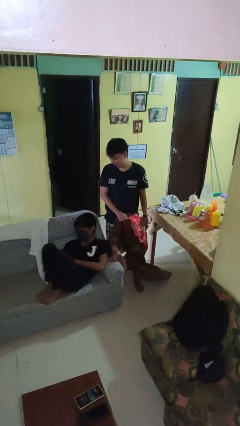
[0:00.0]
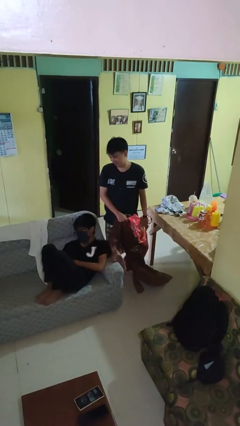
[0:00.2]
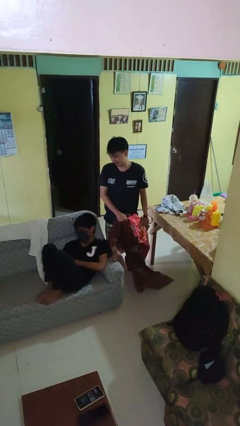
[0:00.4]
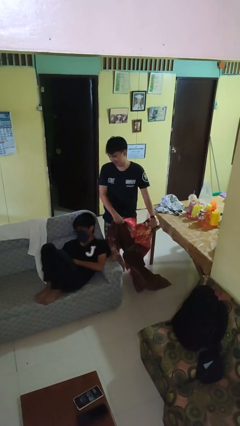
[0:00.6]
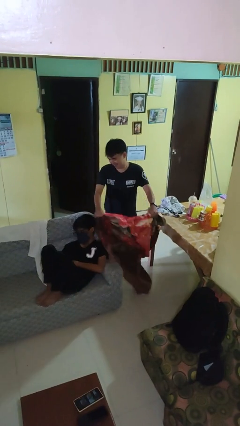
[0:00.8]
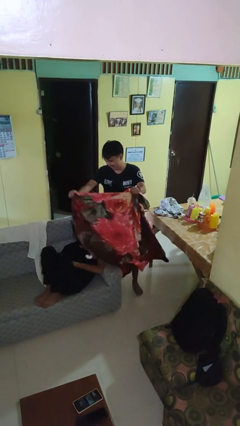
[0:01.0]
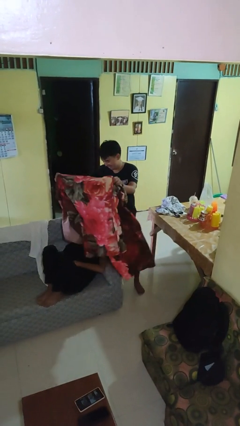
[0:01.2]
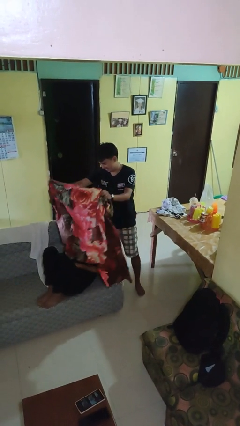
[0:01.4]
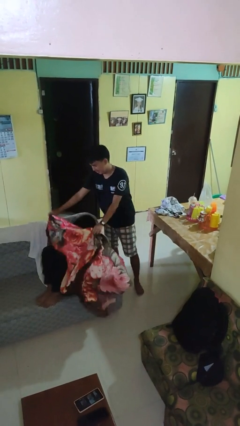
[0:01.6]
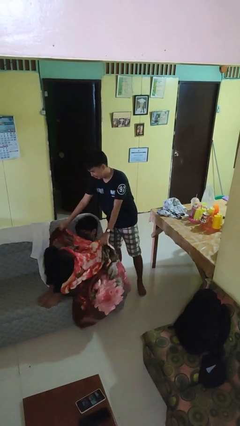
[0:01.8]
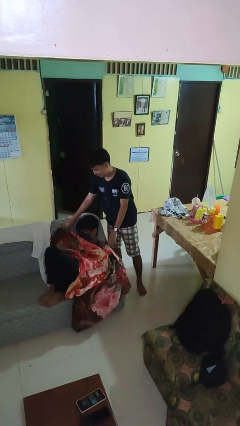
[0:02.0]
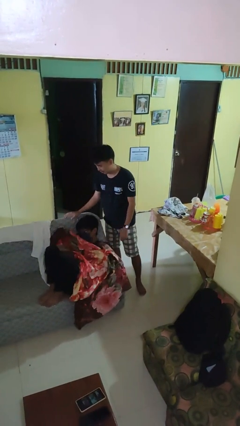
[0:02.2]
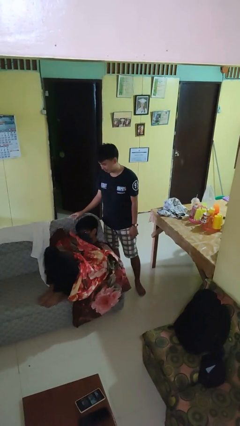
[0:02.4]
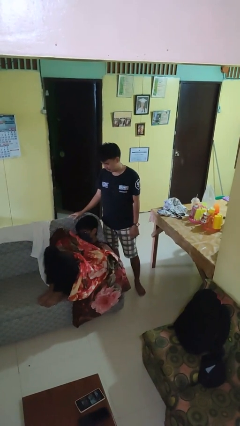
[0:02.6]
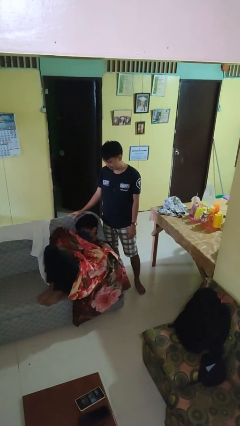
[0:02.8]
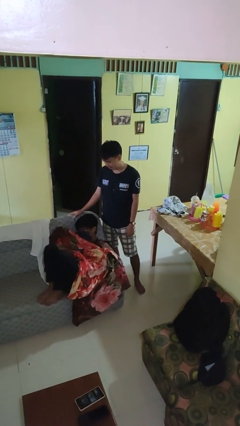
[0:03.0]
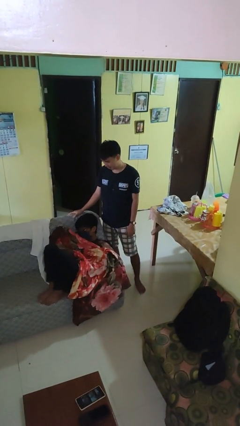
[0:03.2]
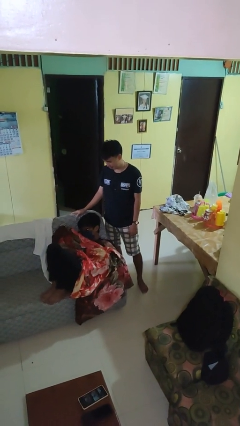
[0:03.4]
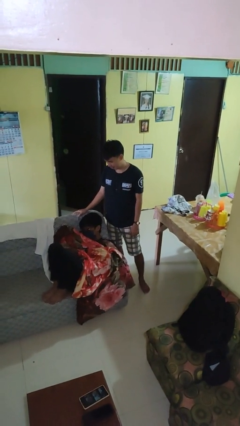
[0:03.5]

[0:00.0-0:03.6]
person covers friend with blanket

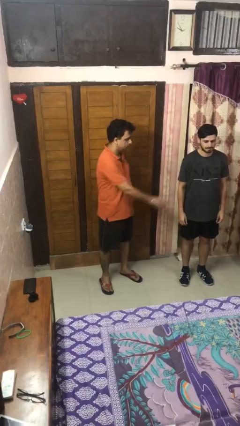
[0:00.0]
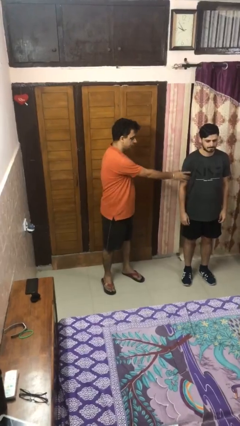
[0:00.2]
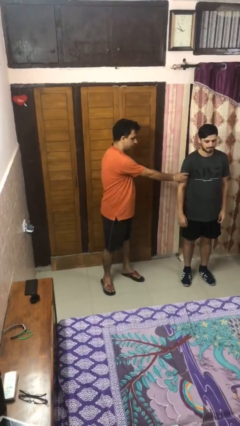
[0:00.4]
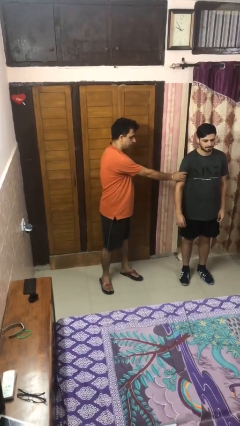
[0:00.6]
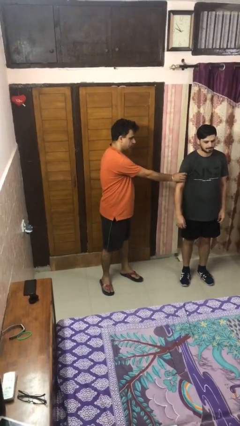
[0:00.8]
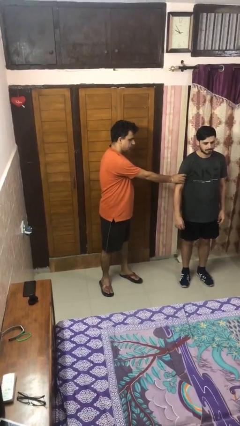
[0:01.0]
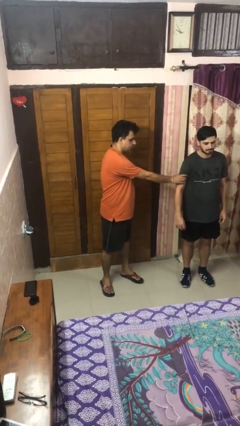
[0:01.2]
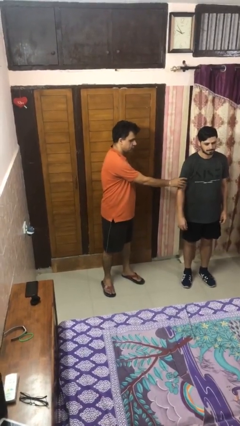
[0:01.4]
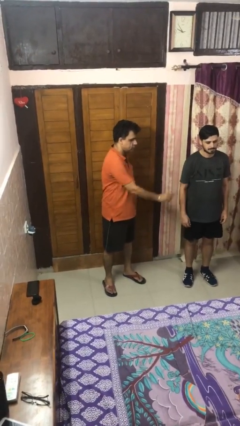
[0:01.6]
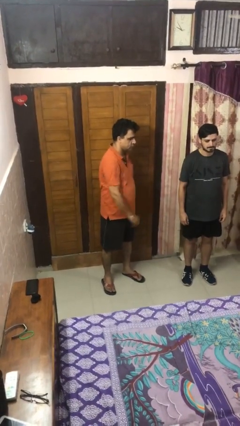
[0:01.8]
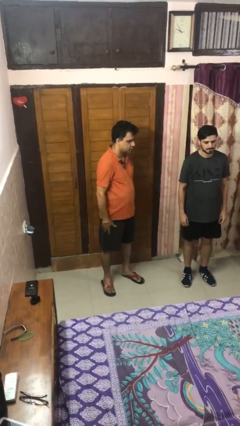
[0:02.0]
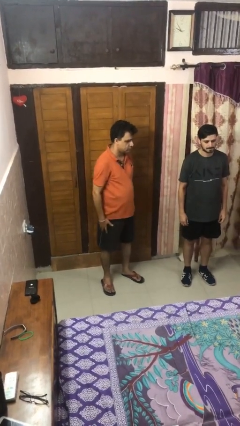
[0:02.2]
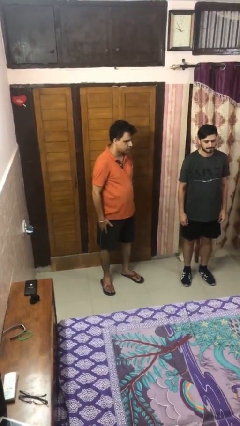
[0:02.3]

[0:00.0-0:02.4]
person grabs person by bicep

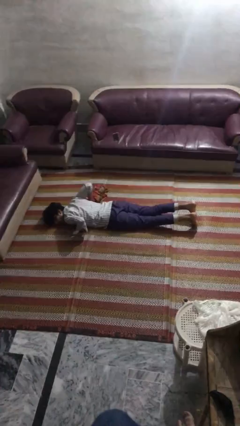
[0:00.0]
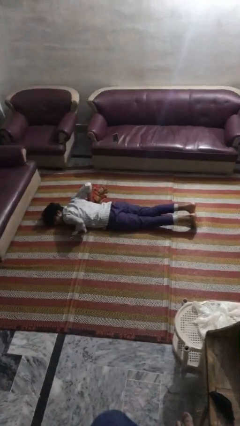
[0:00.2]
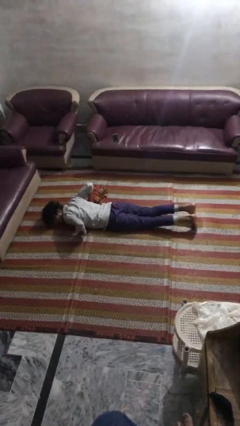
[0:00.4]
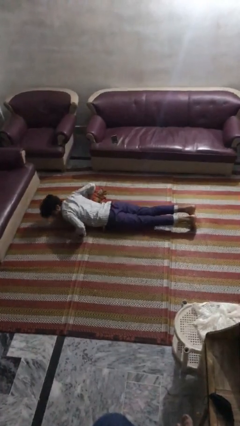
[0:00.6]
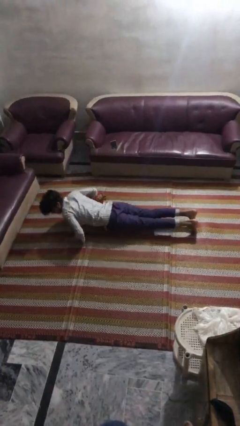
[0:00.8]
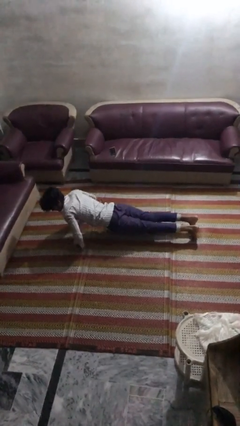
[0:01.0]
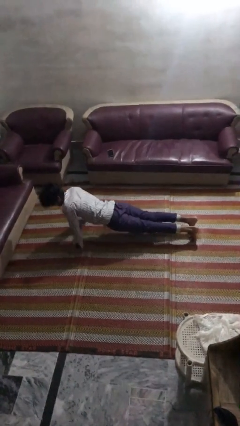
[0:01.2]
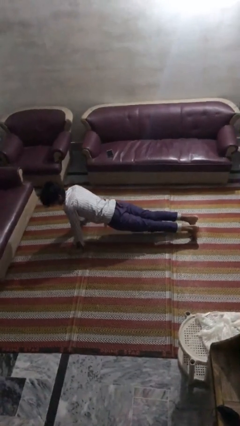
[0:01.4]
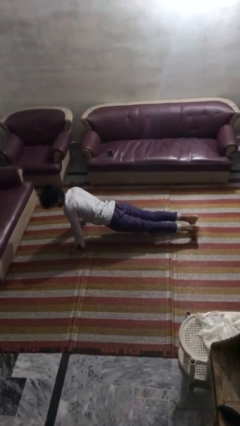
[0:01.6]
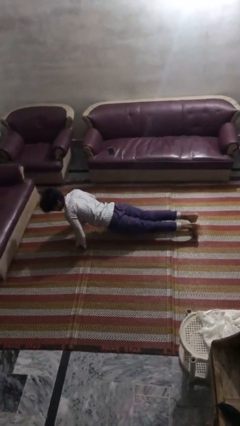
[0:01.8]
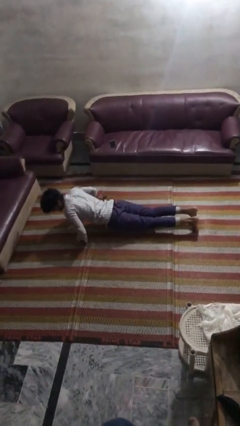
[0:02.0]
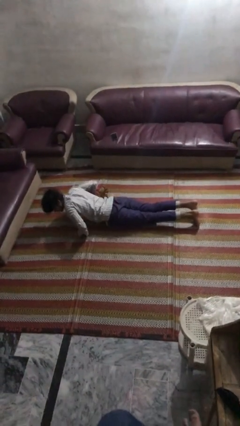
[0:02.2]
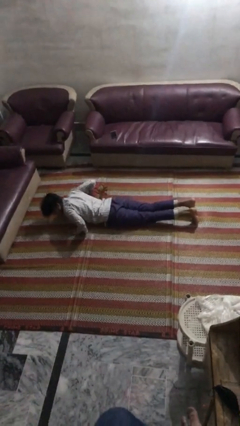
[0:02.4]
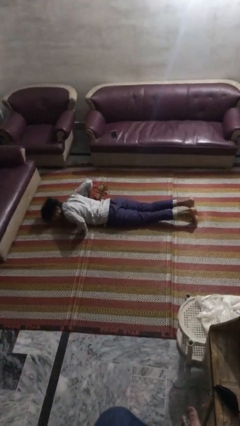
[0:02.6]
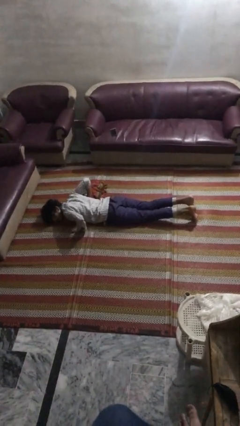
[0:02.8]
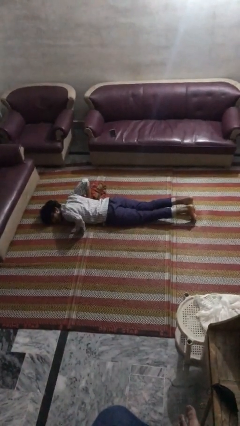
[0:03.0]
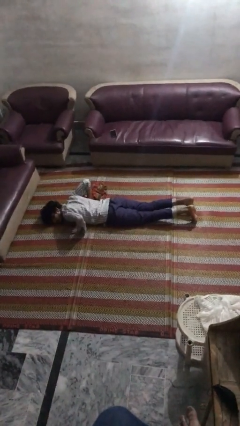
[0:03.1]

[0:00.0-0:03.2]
person exercises with pushup

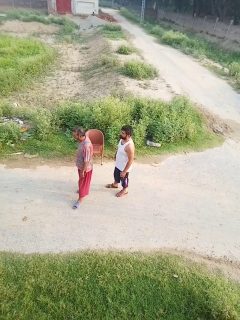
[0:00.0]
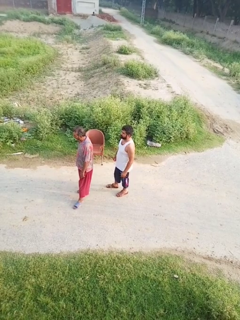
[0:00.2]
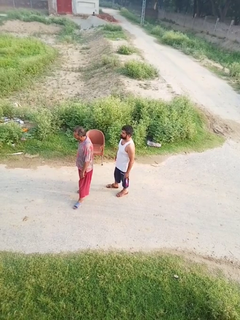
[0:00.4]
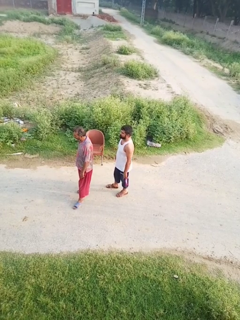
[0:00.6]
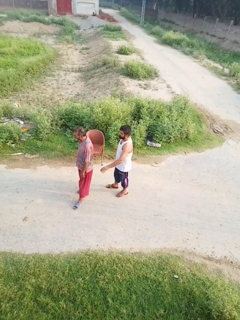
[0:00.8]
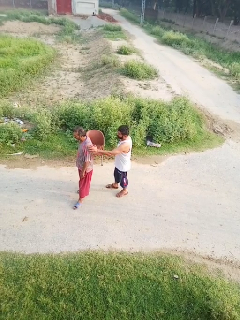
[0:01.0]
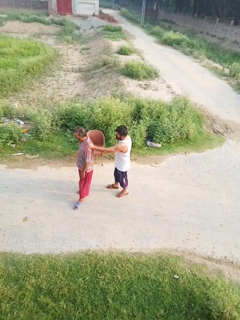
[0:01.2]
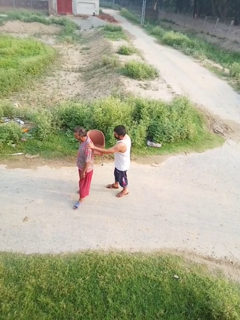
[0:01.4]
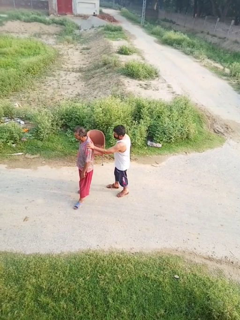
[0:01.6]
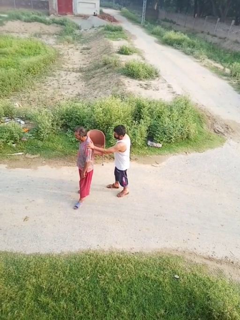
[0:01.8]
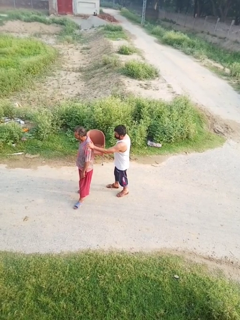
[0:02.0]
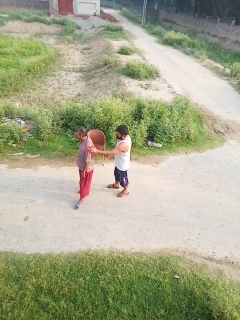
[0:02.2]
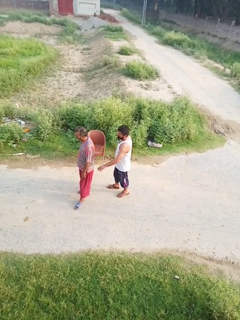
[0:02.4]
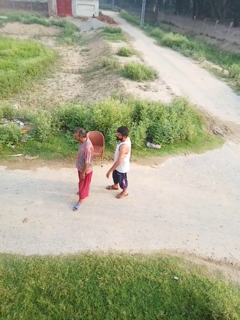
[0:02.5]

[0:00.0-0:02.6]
person touches back of person

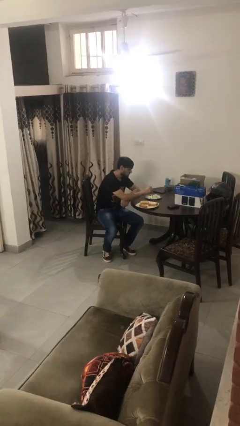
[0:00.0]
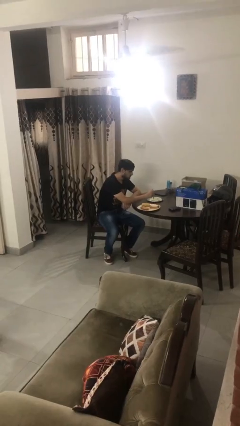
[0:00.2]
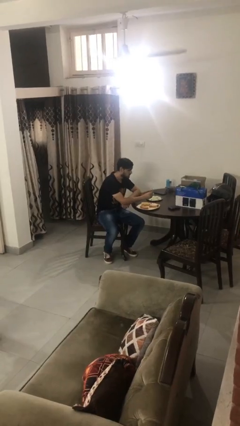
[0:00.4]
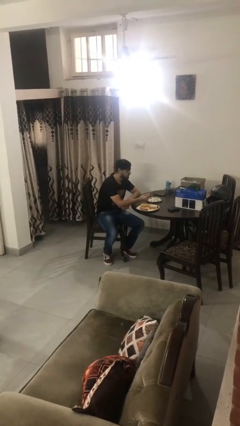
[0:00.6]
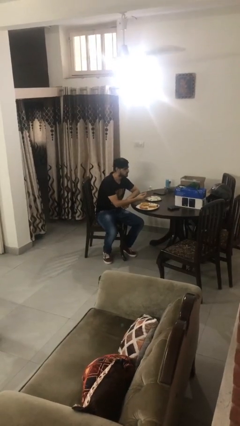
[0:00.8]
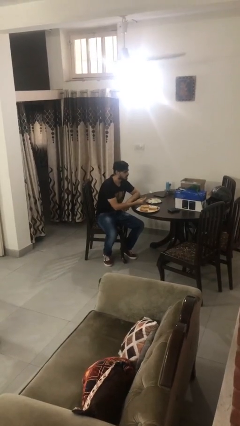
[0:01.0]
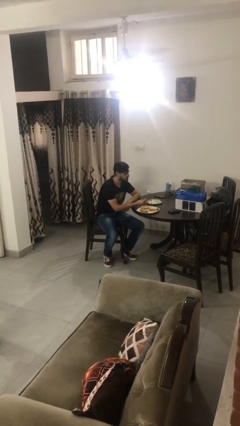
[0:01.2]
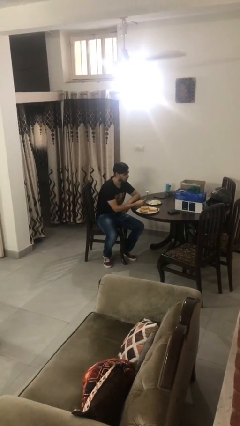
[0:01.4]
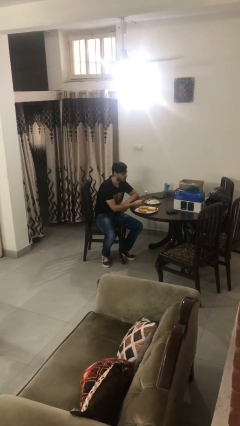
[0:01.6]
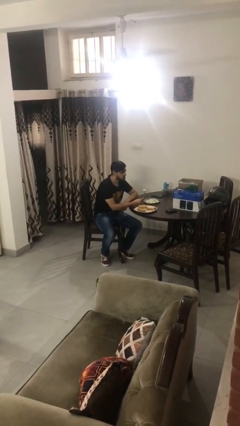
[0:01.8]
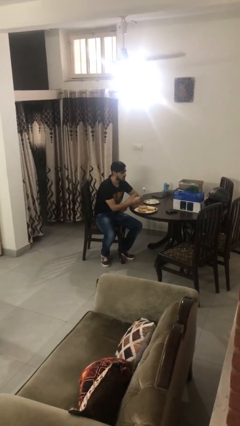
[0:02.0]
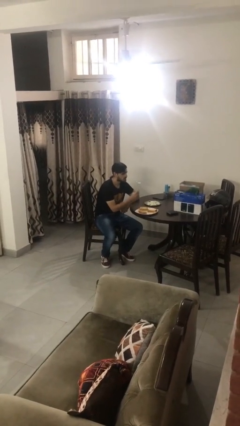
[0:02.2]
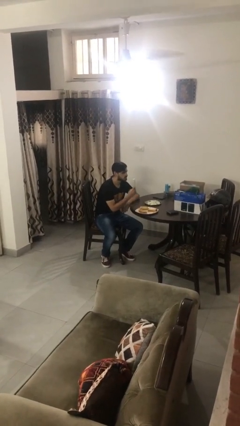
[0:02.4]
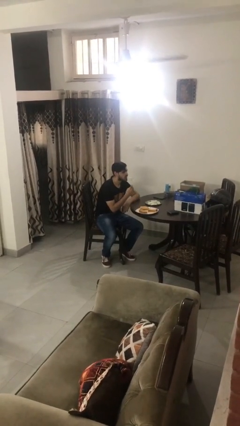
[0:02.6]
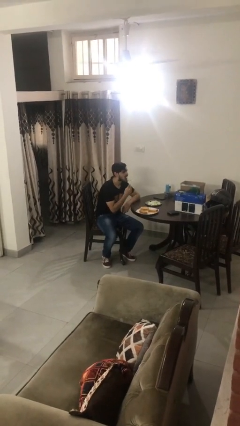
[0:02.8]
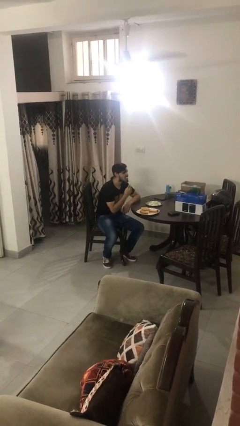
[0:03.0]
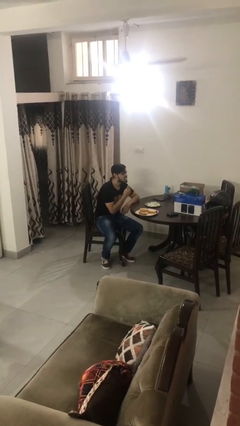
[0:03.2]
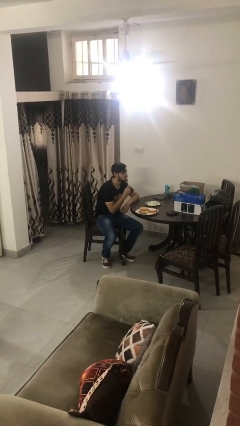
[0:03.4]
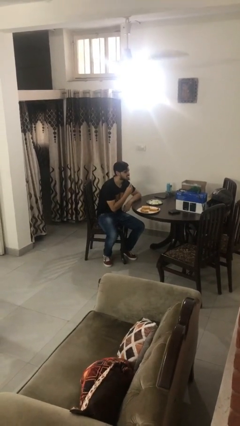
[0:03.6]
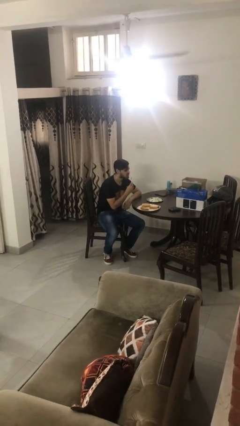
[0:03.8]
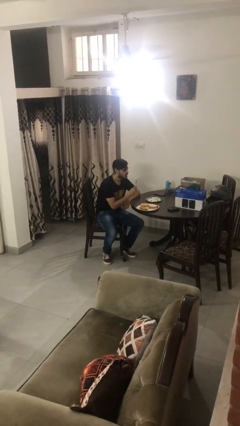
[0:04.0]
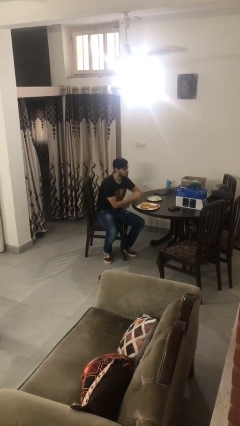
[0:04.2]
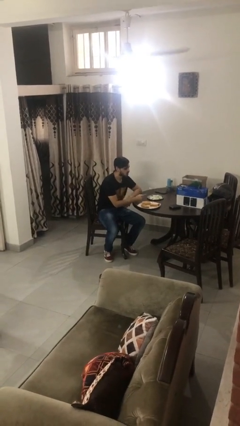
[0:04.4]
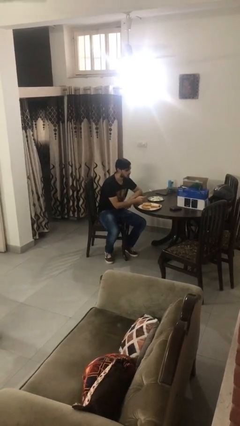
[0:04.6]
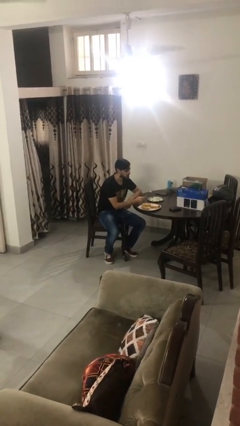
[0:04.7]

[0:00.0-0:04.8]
person eats with utensil

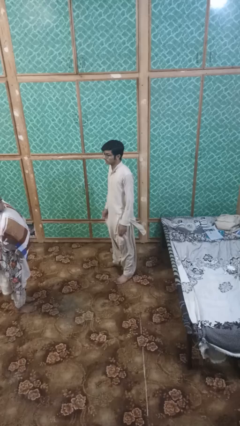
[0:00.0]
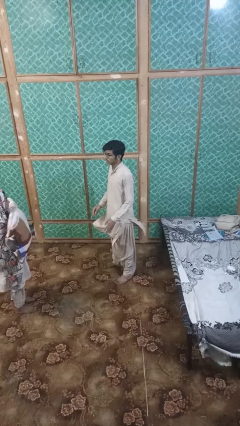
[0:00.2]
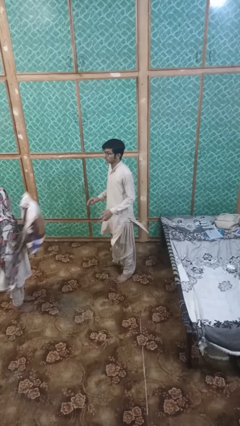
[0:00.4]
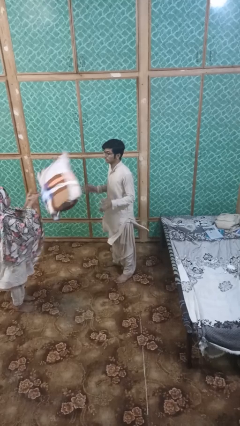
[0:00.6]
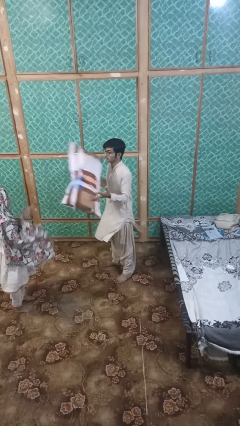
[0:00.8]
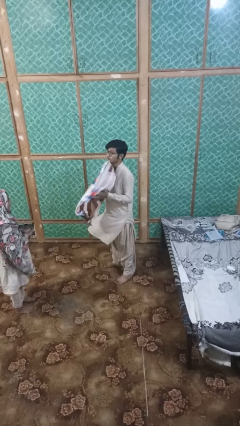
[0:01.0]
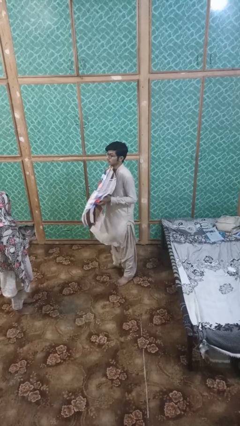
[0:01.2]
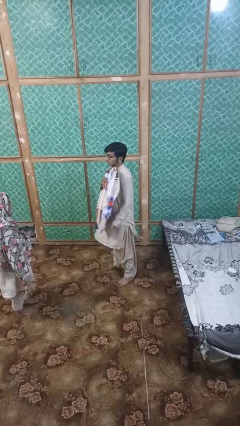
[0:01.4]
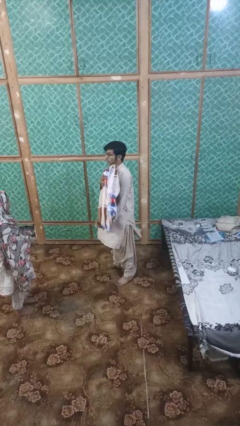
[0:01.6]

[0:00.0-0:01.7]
person catches object from person
